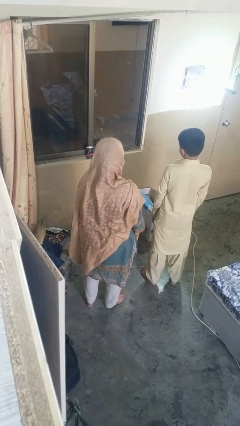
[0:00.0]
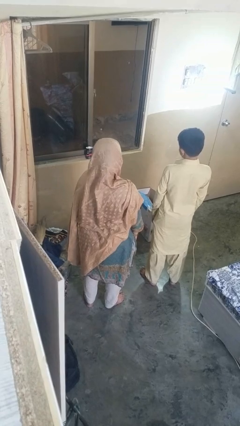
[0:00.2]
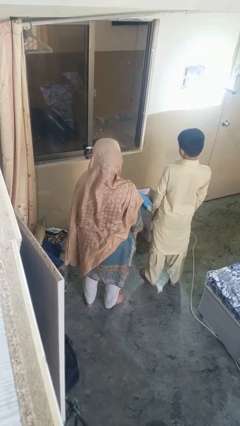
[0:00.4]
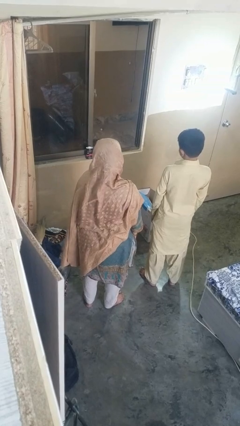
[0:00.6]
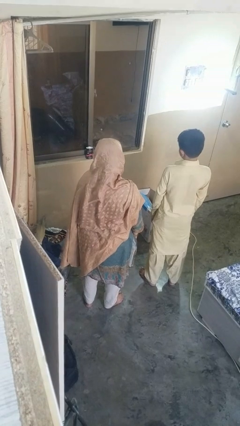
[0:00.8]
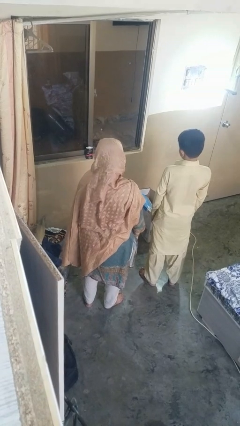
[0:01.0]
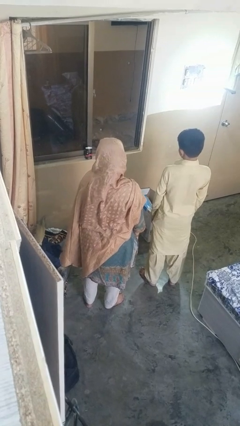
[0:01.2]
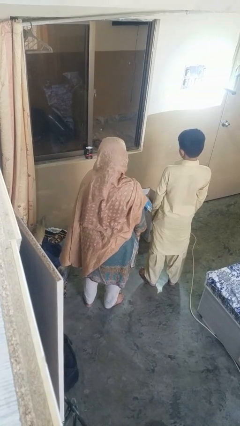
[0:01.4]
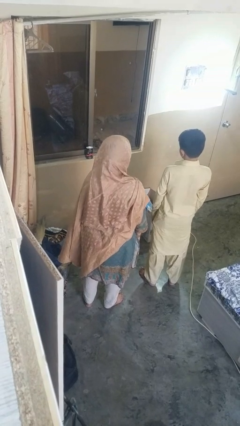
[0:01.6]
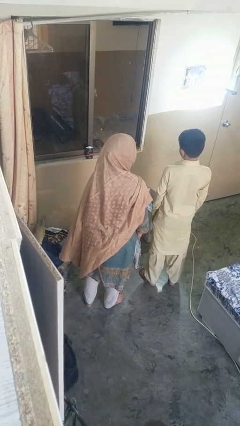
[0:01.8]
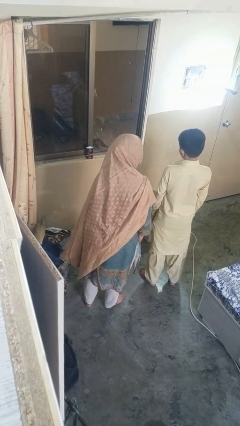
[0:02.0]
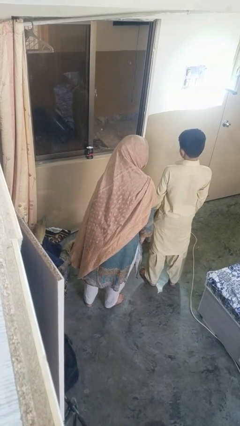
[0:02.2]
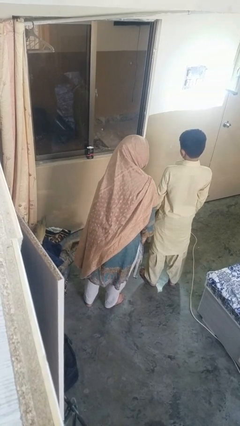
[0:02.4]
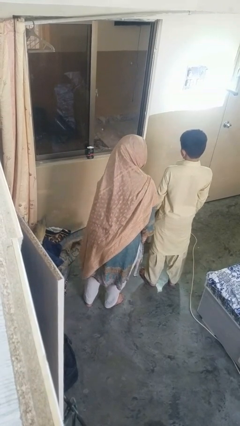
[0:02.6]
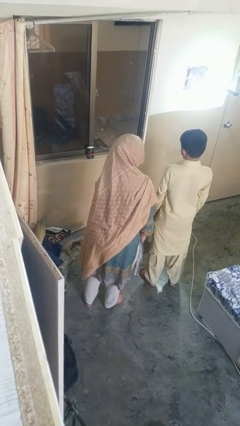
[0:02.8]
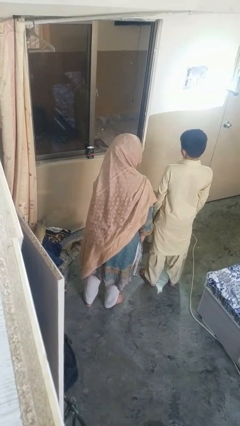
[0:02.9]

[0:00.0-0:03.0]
person laughs with person

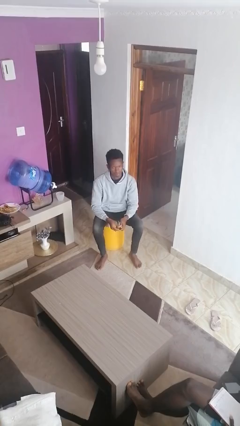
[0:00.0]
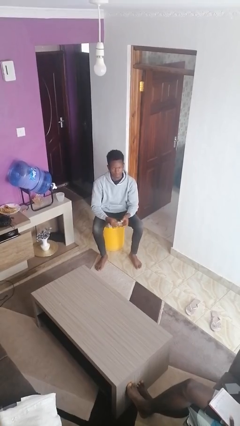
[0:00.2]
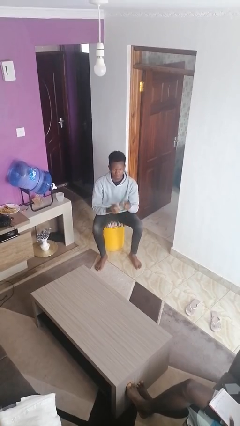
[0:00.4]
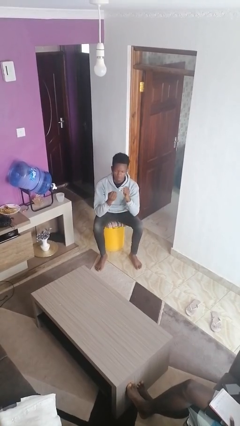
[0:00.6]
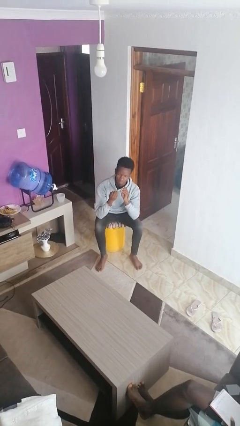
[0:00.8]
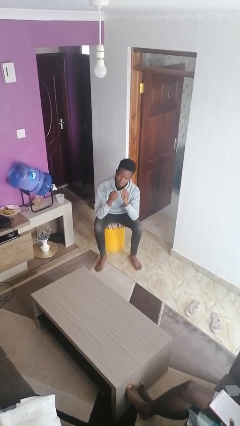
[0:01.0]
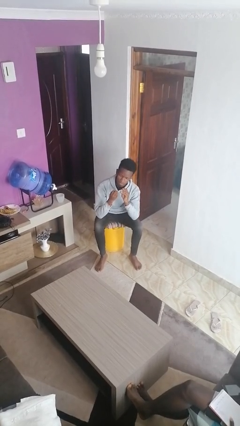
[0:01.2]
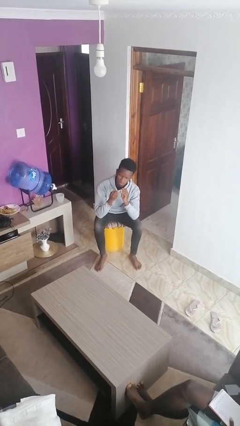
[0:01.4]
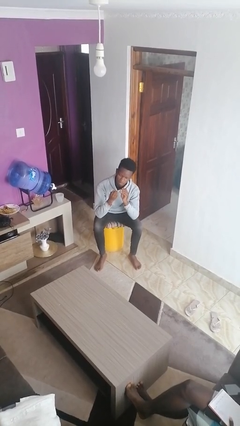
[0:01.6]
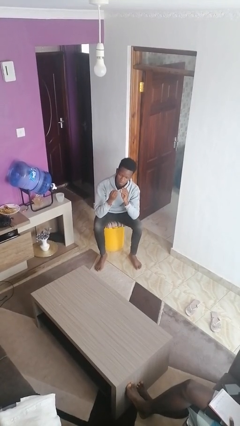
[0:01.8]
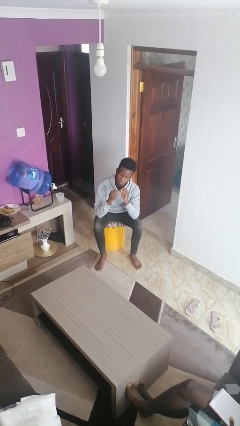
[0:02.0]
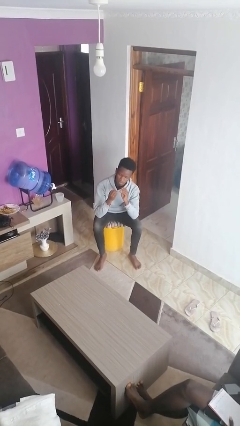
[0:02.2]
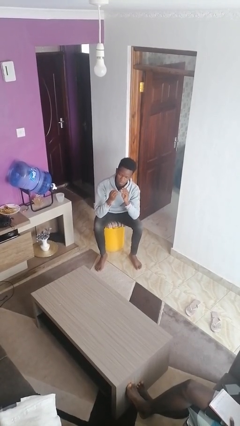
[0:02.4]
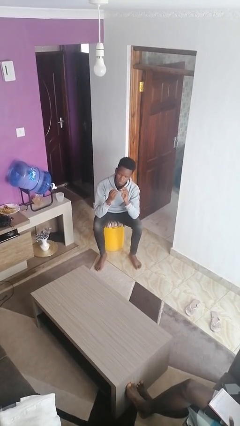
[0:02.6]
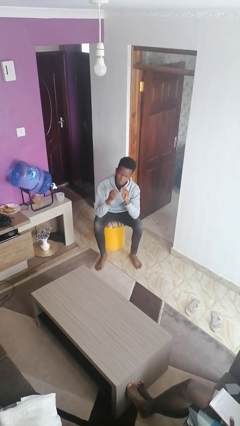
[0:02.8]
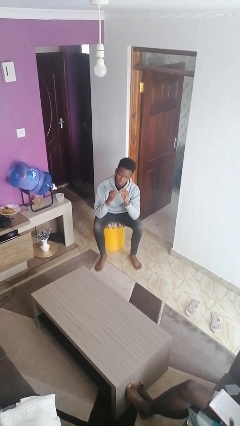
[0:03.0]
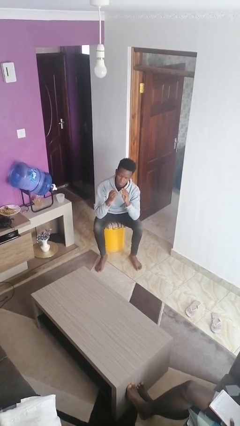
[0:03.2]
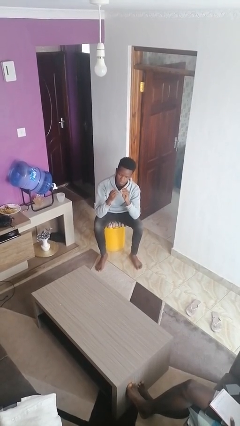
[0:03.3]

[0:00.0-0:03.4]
person clips fingernails

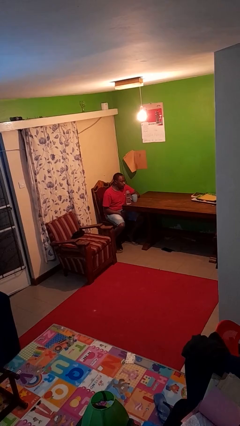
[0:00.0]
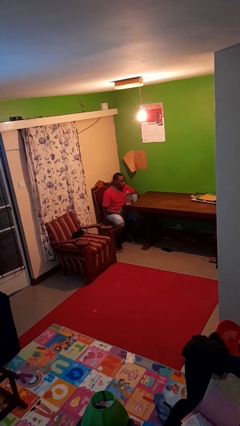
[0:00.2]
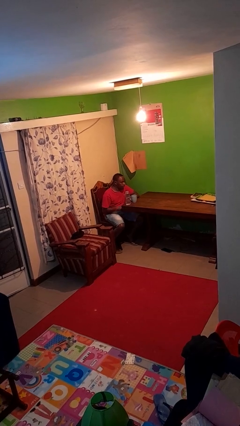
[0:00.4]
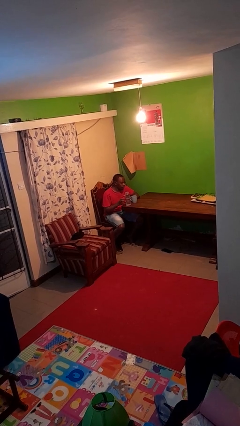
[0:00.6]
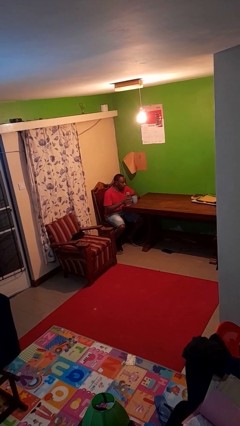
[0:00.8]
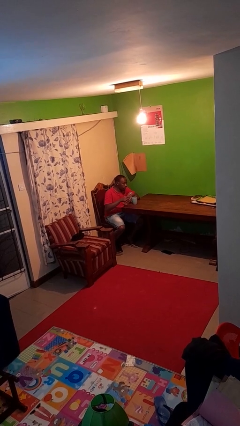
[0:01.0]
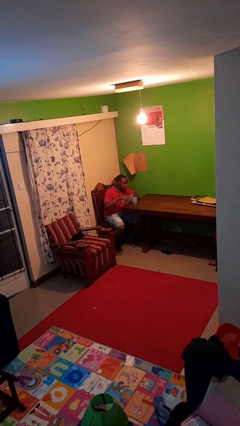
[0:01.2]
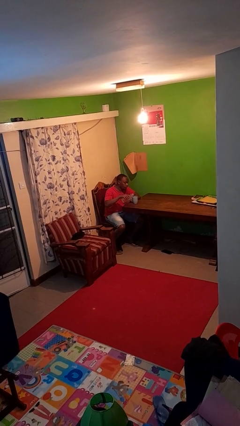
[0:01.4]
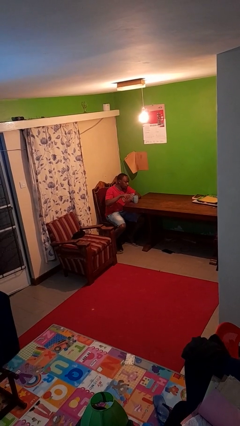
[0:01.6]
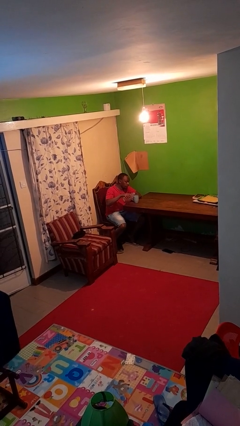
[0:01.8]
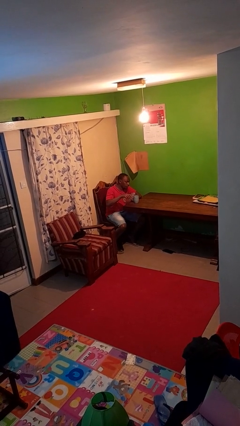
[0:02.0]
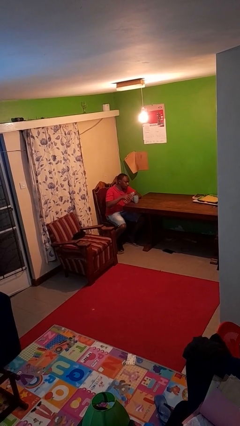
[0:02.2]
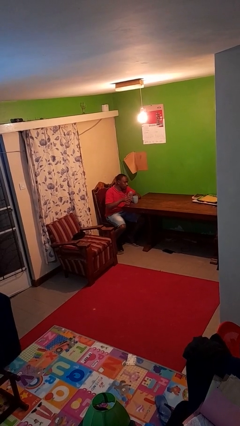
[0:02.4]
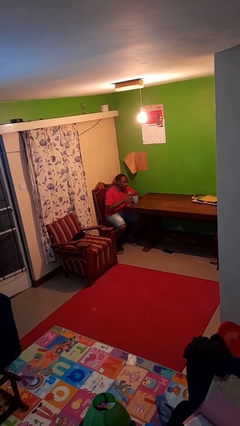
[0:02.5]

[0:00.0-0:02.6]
person pours liquid into cup

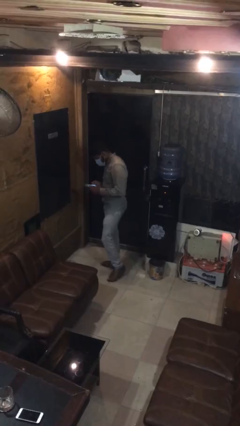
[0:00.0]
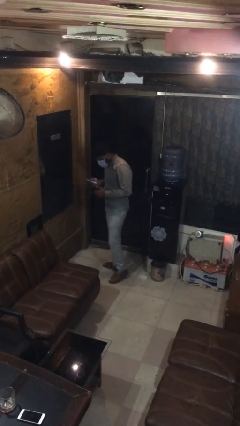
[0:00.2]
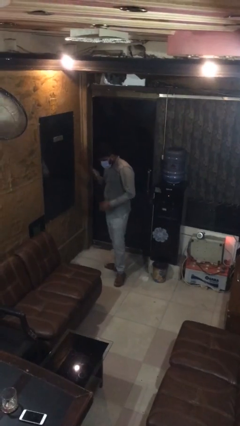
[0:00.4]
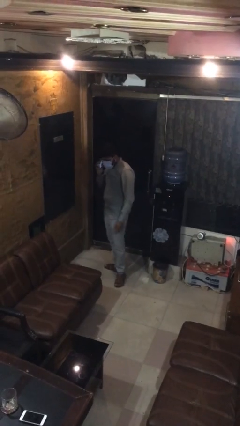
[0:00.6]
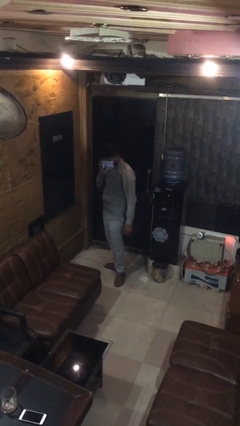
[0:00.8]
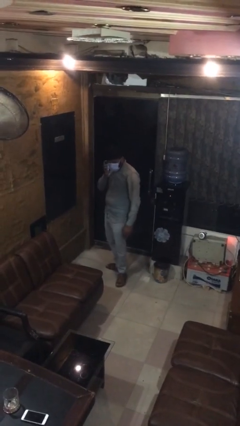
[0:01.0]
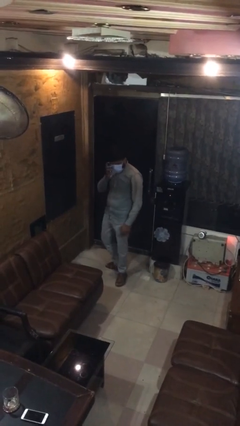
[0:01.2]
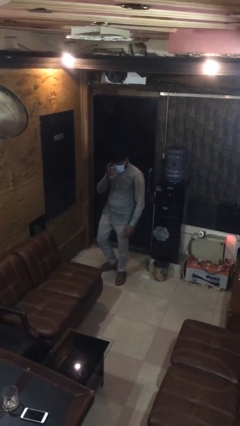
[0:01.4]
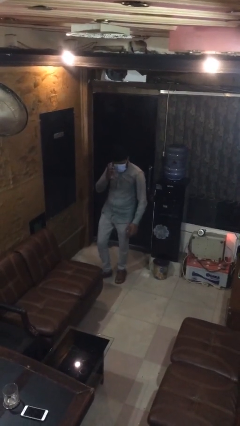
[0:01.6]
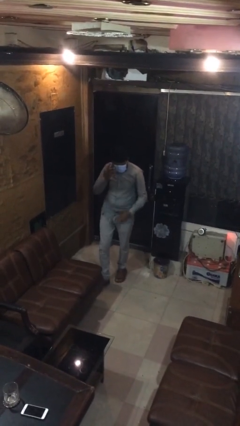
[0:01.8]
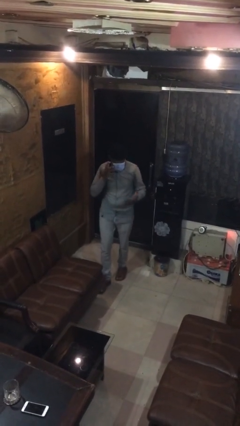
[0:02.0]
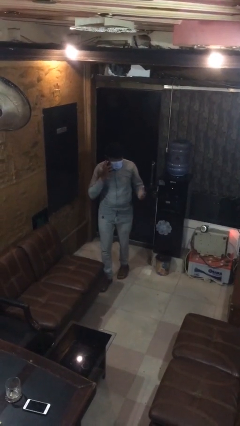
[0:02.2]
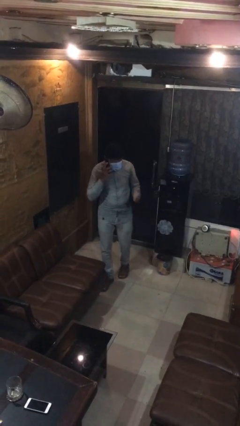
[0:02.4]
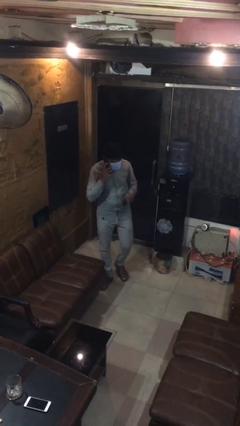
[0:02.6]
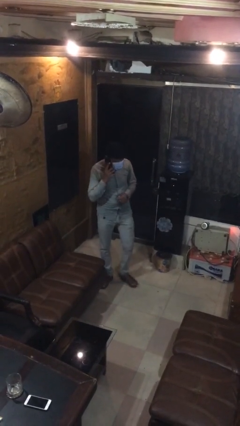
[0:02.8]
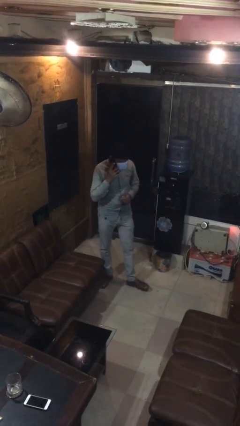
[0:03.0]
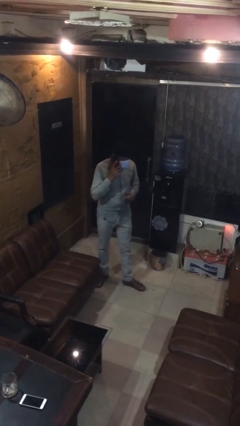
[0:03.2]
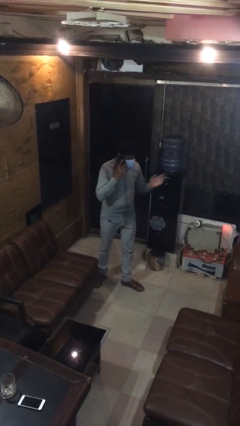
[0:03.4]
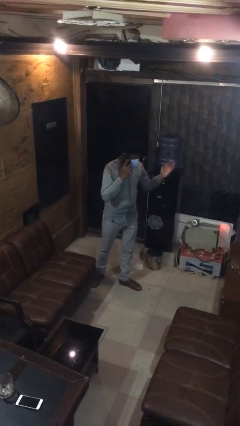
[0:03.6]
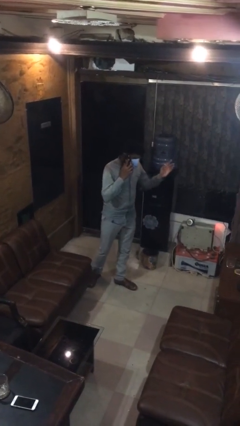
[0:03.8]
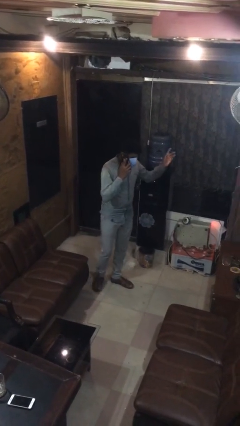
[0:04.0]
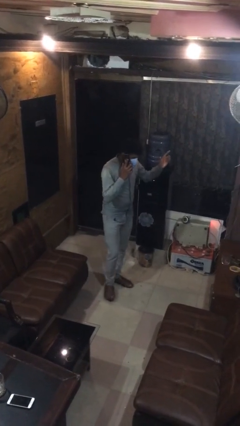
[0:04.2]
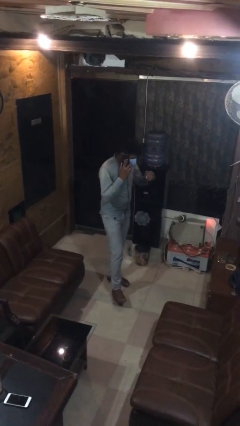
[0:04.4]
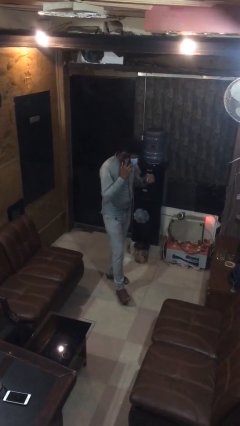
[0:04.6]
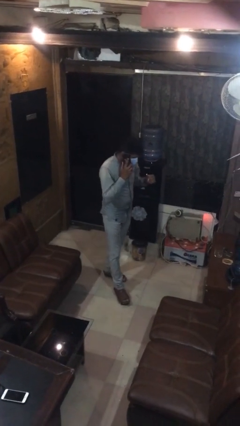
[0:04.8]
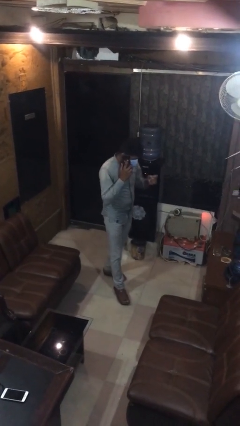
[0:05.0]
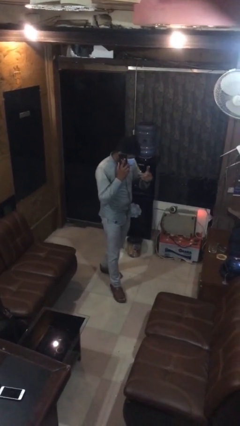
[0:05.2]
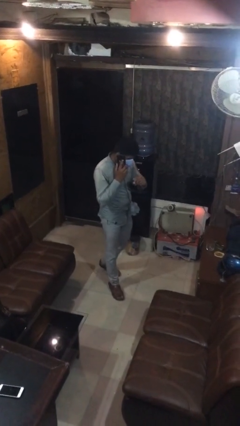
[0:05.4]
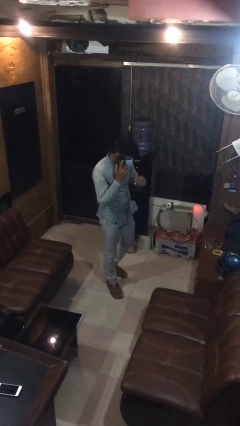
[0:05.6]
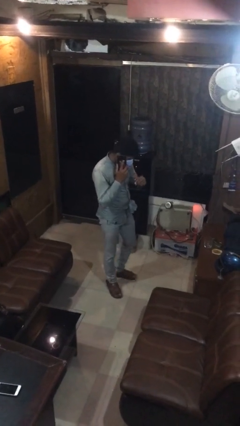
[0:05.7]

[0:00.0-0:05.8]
person talks on phone

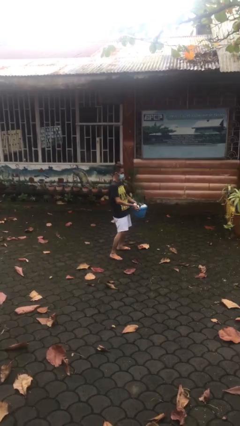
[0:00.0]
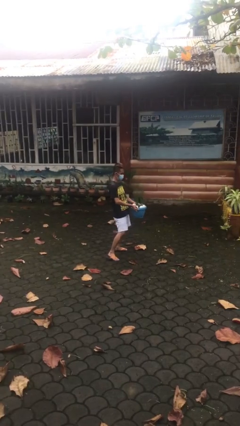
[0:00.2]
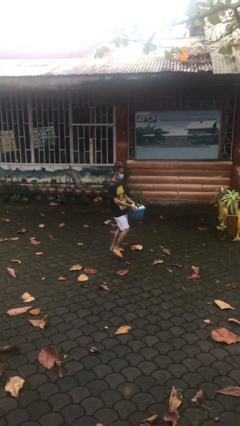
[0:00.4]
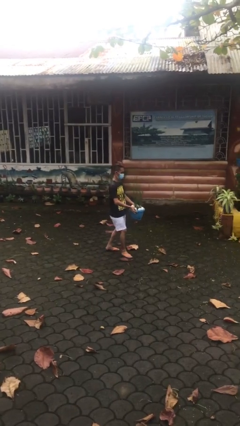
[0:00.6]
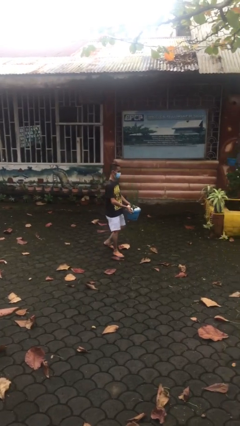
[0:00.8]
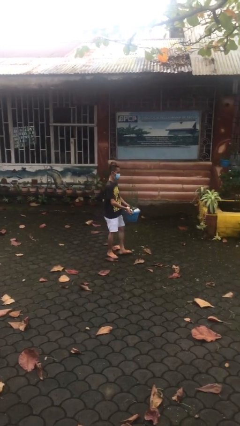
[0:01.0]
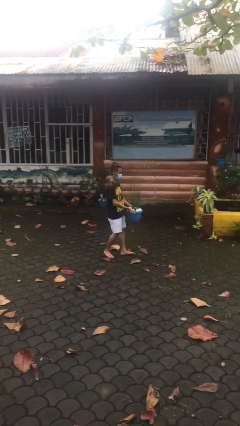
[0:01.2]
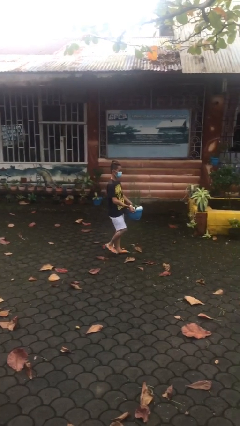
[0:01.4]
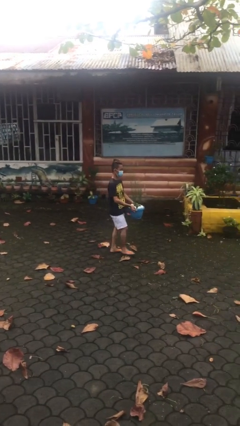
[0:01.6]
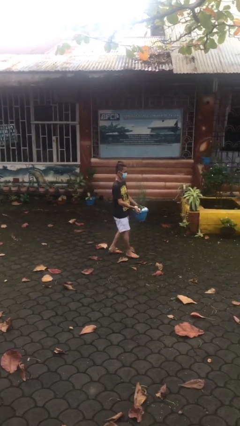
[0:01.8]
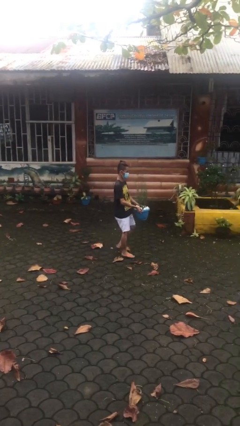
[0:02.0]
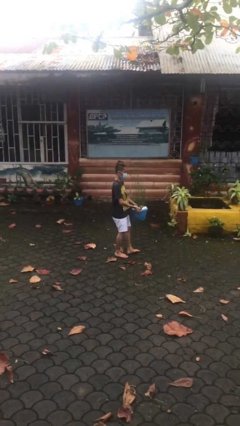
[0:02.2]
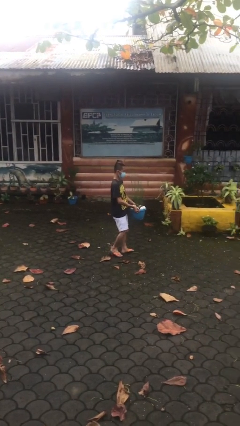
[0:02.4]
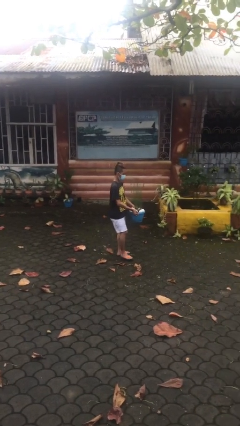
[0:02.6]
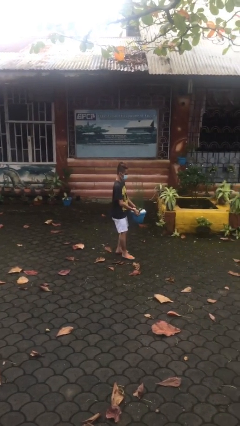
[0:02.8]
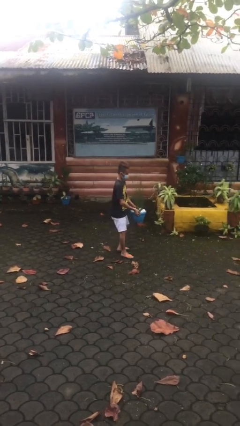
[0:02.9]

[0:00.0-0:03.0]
person carries heavy object
